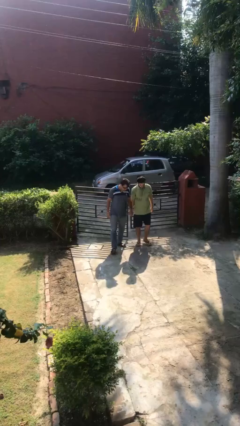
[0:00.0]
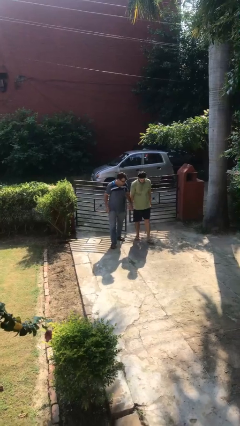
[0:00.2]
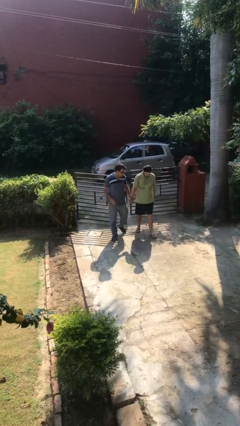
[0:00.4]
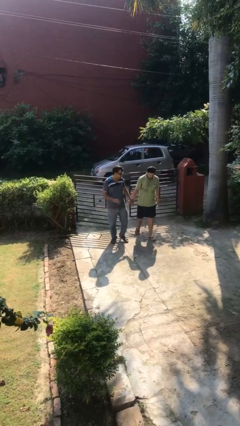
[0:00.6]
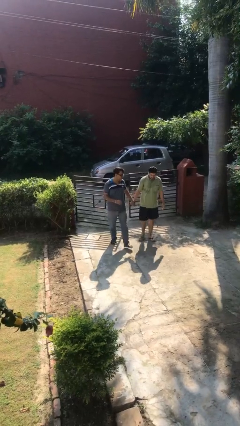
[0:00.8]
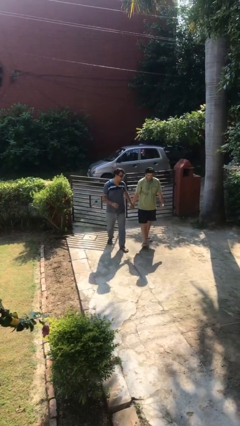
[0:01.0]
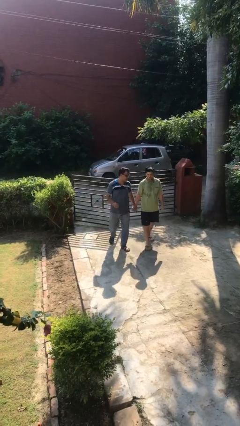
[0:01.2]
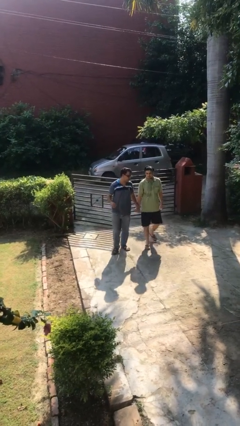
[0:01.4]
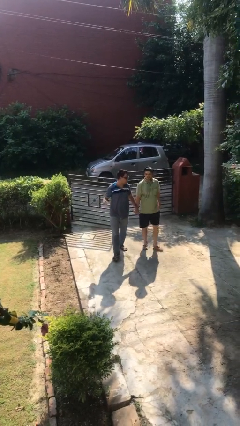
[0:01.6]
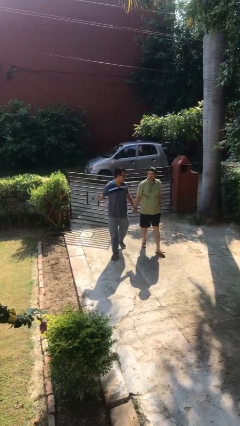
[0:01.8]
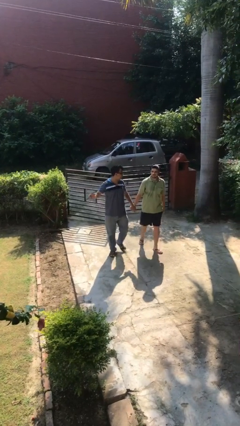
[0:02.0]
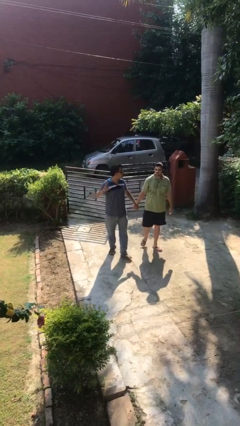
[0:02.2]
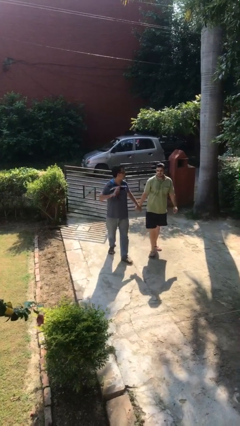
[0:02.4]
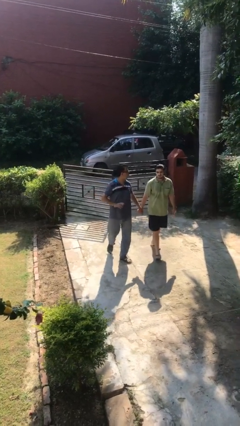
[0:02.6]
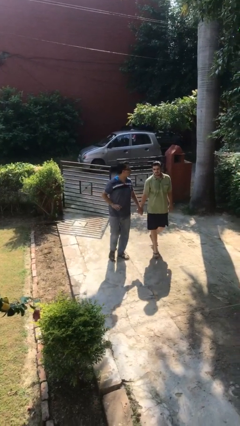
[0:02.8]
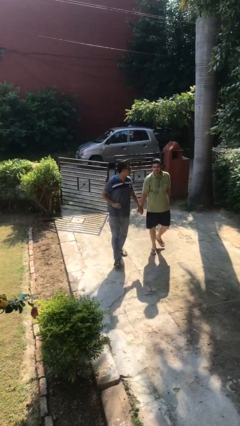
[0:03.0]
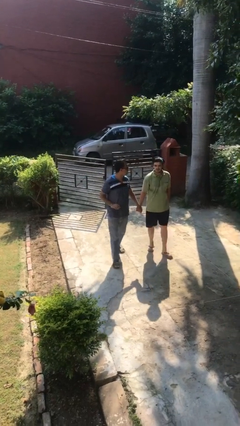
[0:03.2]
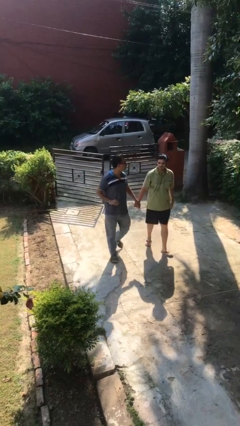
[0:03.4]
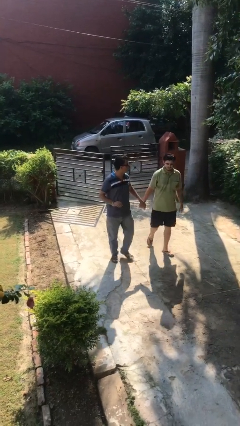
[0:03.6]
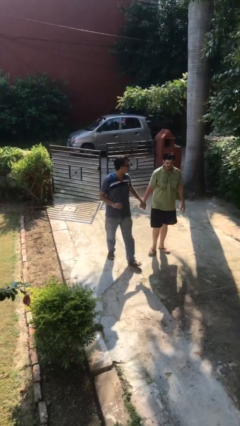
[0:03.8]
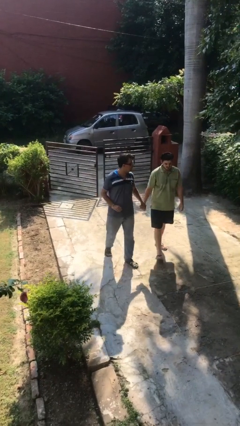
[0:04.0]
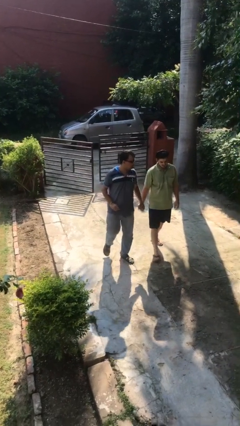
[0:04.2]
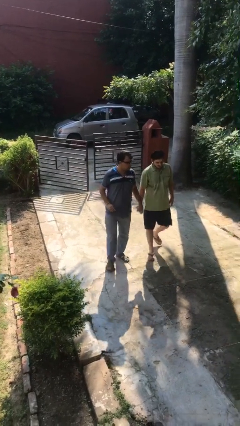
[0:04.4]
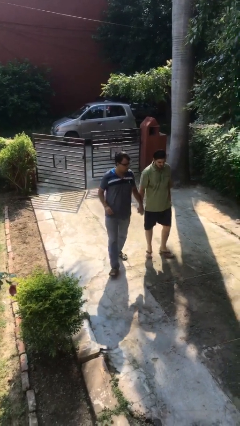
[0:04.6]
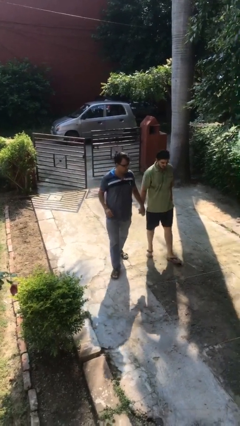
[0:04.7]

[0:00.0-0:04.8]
person holds hand

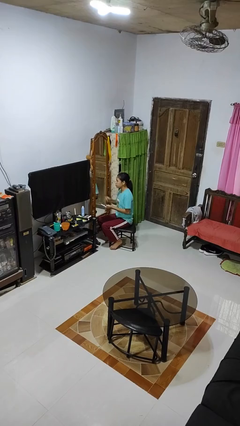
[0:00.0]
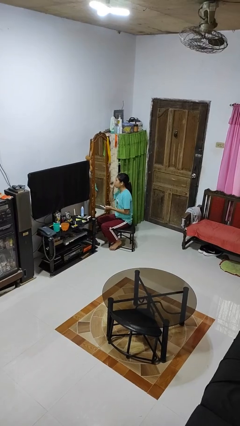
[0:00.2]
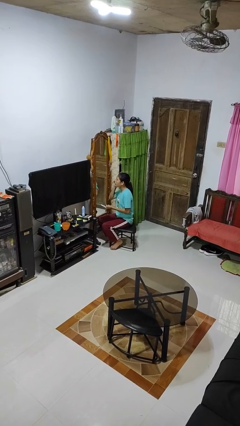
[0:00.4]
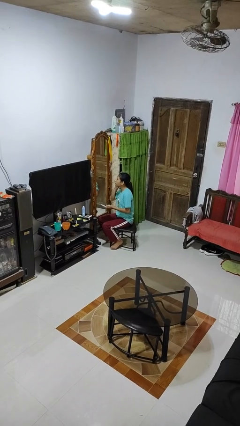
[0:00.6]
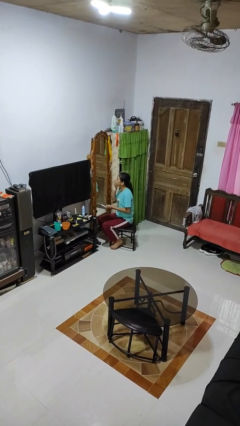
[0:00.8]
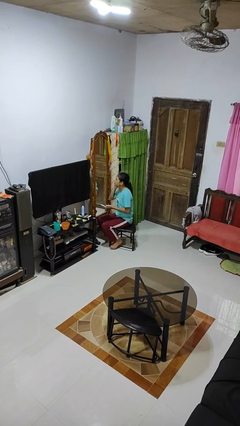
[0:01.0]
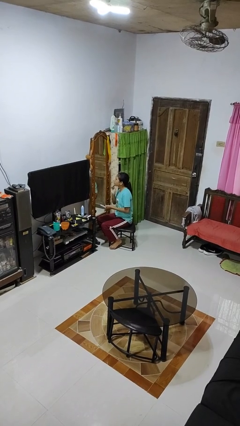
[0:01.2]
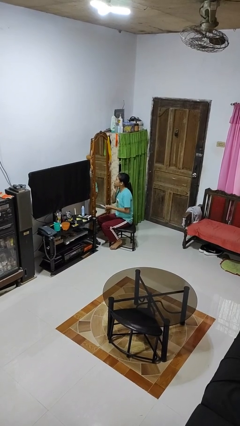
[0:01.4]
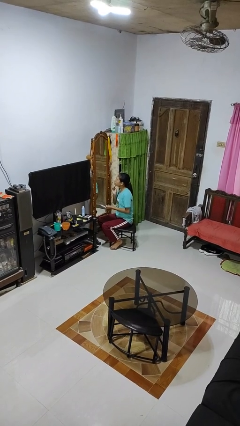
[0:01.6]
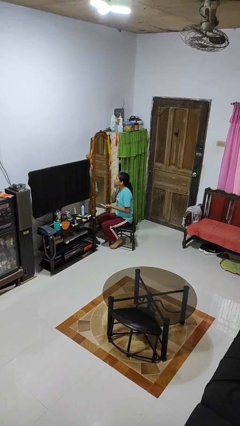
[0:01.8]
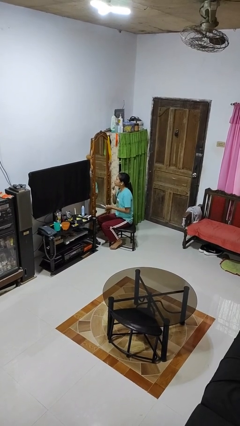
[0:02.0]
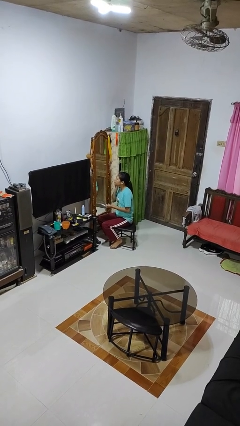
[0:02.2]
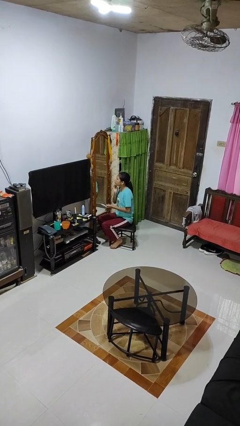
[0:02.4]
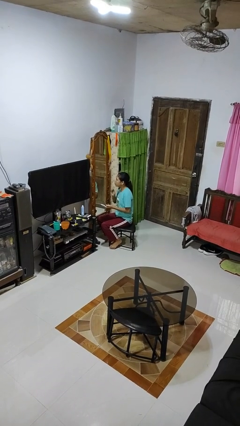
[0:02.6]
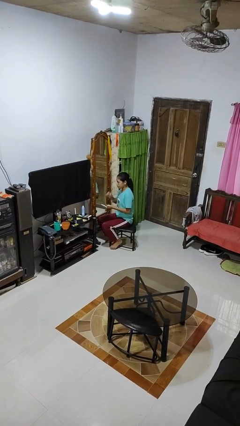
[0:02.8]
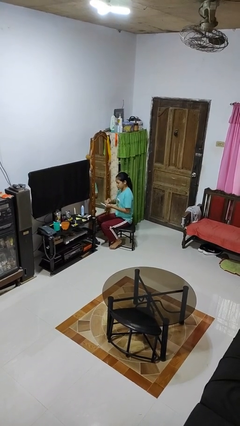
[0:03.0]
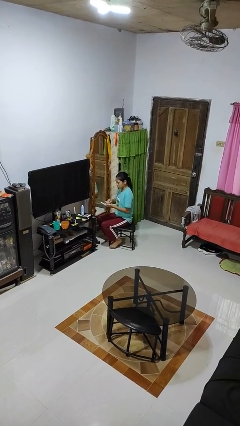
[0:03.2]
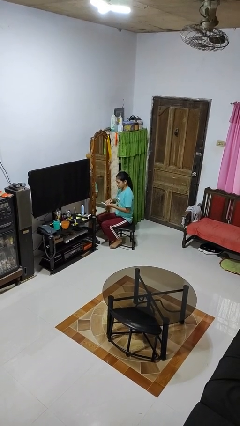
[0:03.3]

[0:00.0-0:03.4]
person applies foundation makeup

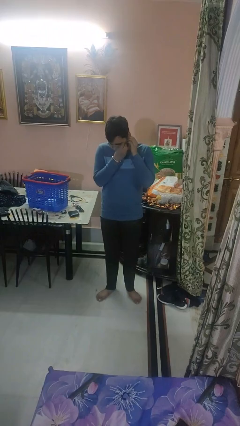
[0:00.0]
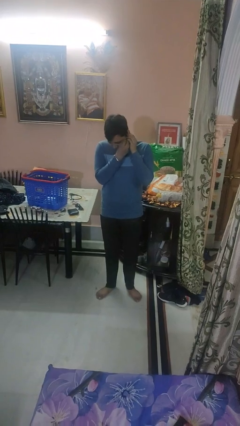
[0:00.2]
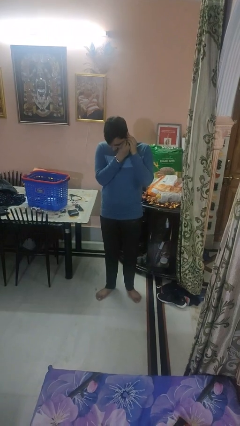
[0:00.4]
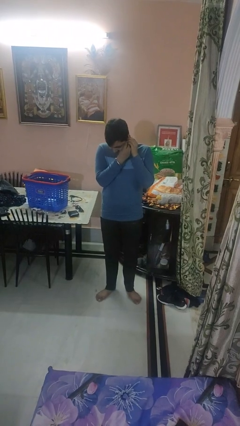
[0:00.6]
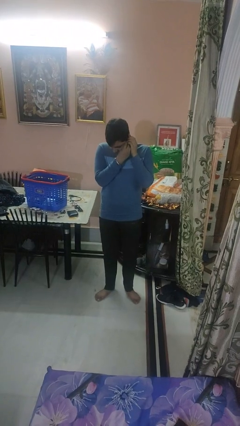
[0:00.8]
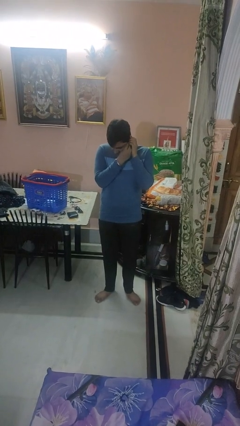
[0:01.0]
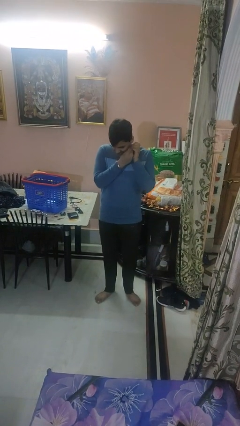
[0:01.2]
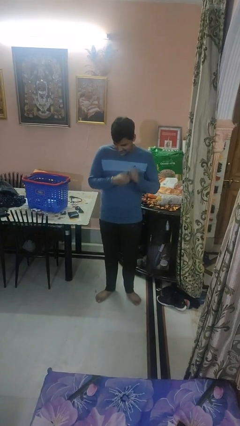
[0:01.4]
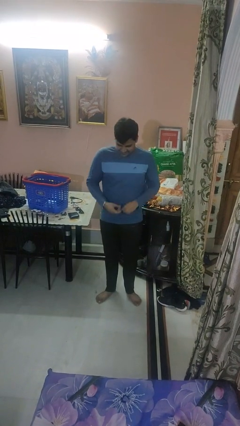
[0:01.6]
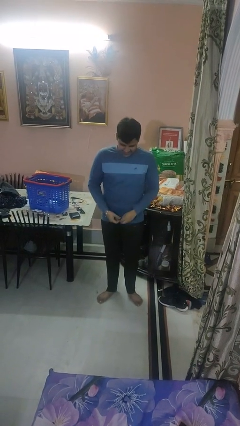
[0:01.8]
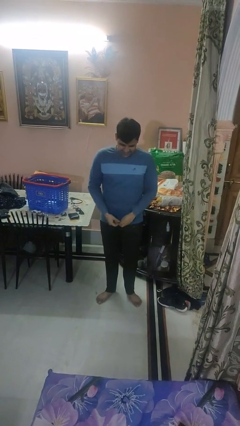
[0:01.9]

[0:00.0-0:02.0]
person takes off earrings

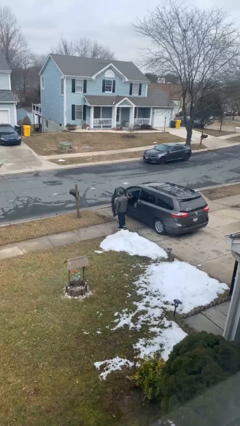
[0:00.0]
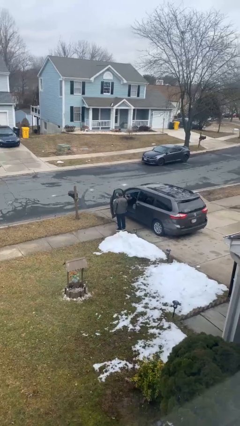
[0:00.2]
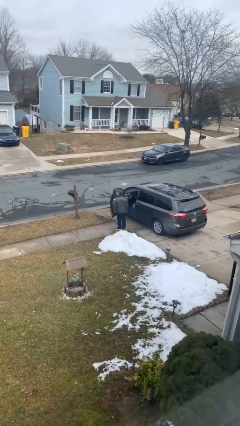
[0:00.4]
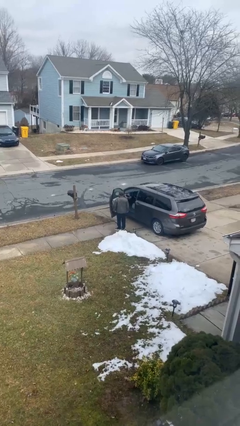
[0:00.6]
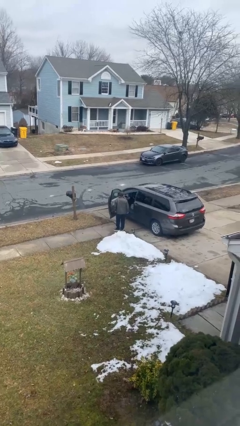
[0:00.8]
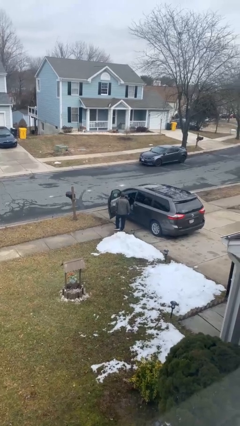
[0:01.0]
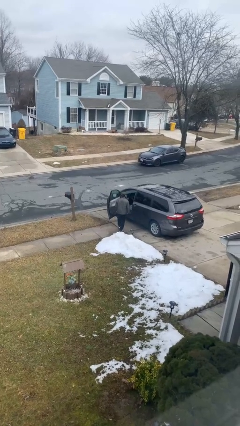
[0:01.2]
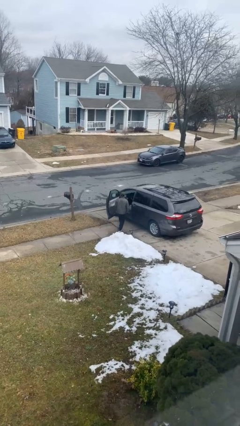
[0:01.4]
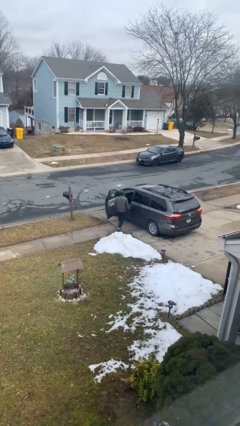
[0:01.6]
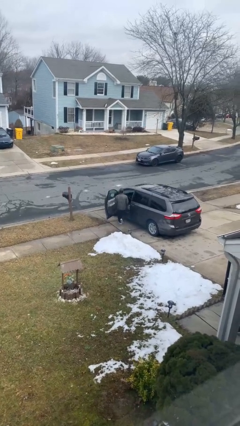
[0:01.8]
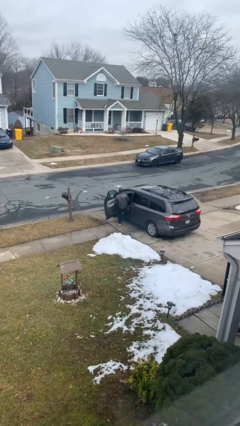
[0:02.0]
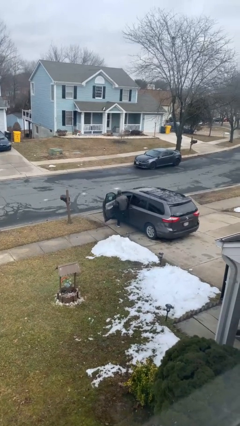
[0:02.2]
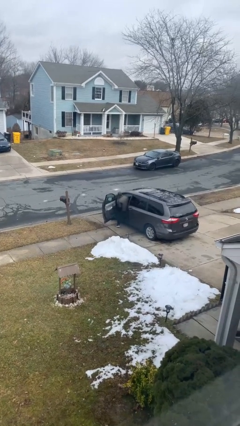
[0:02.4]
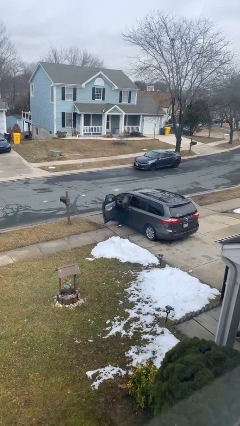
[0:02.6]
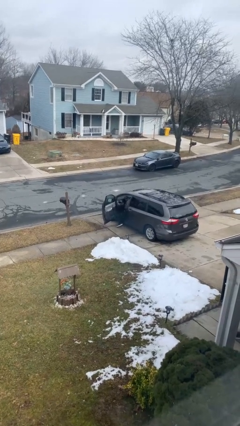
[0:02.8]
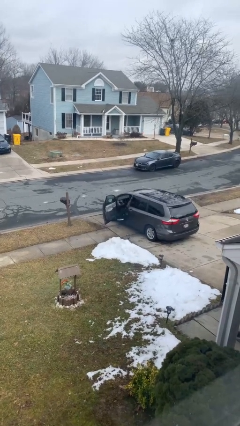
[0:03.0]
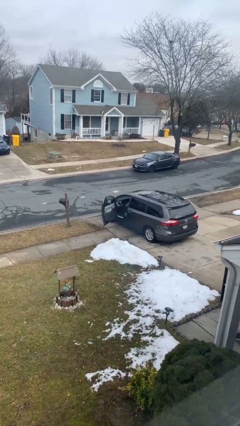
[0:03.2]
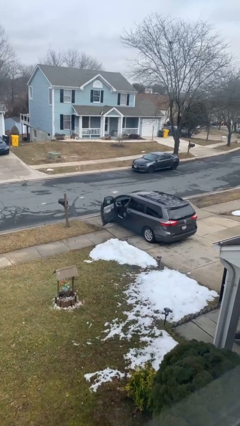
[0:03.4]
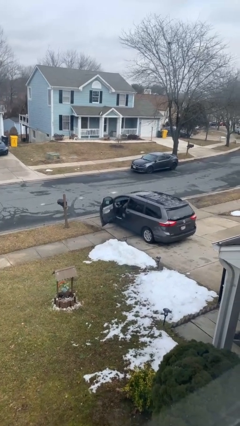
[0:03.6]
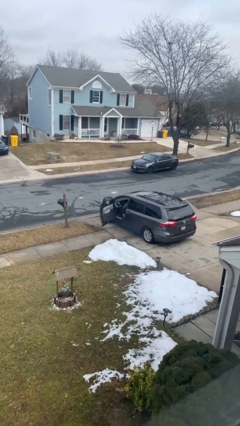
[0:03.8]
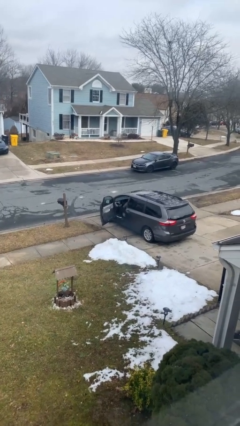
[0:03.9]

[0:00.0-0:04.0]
person enters car

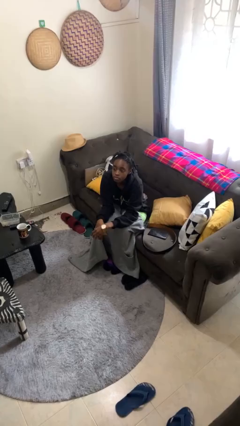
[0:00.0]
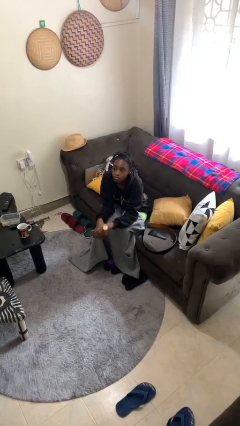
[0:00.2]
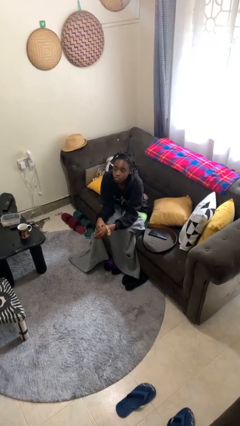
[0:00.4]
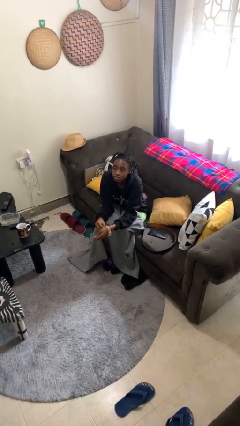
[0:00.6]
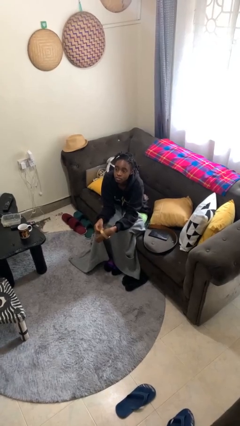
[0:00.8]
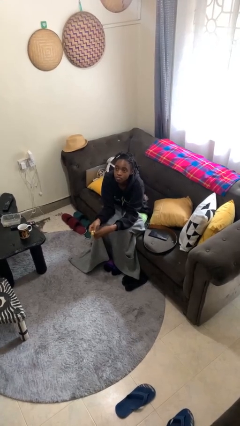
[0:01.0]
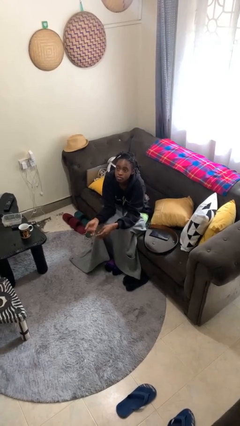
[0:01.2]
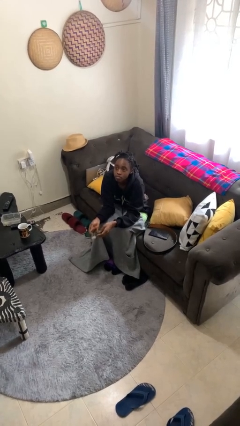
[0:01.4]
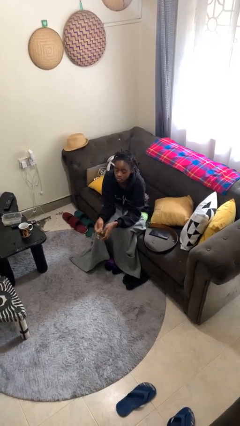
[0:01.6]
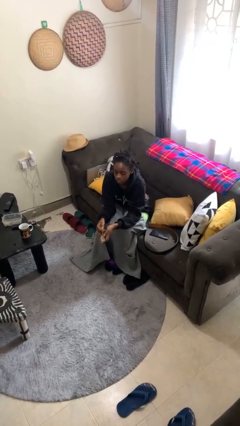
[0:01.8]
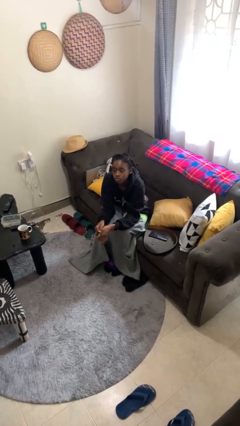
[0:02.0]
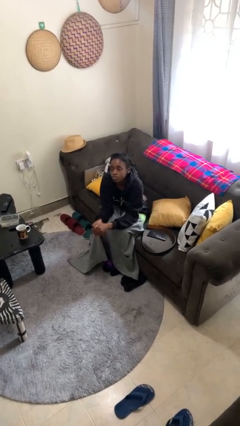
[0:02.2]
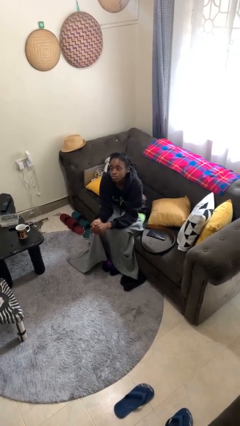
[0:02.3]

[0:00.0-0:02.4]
person takes off wristwatch

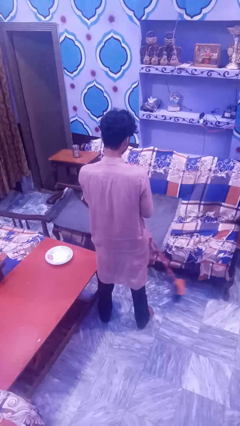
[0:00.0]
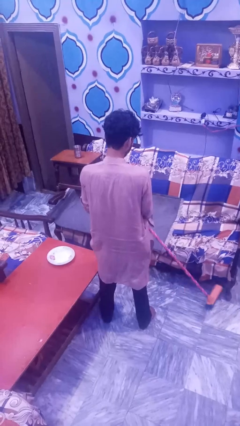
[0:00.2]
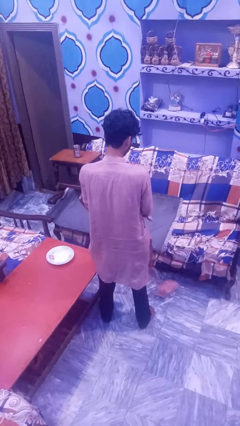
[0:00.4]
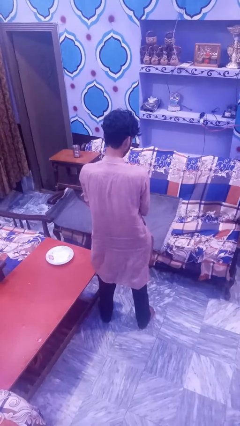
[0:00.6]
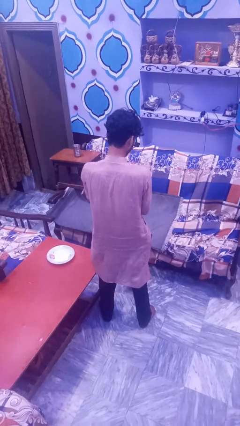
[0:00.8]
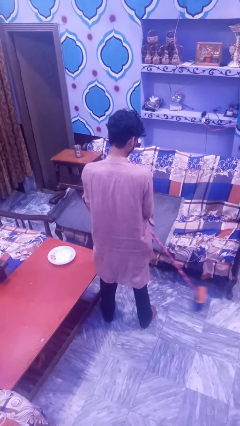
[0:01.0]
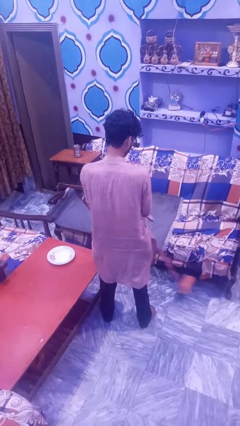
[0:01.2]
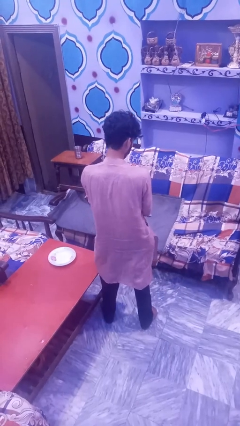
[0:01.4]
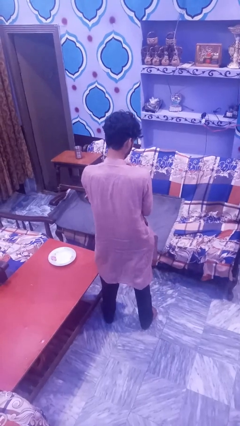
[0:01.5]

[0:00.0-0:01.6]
person mops
